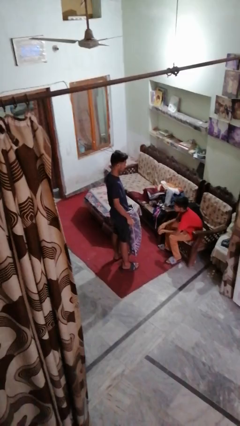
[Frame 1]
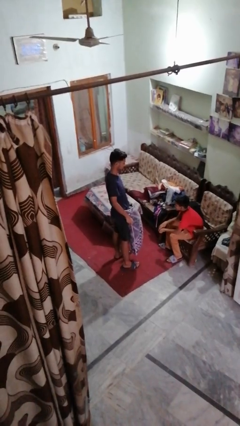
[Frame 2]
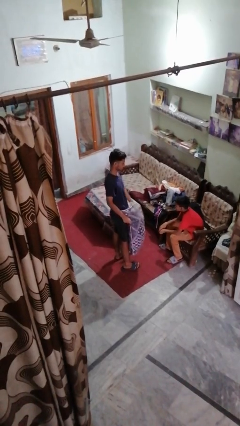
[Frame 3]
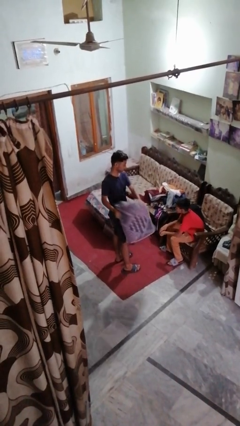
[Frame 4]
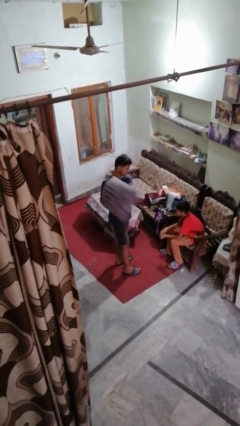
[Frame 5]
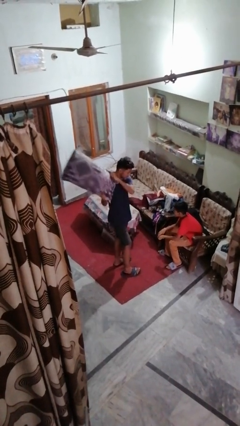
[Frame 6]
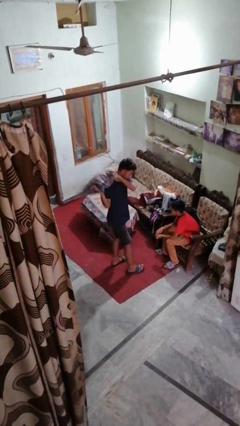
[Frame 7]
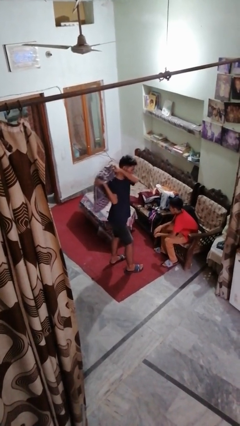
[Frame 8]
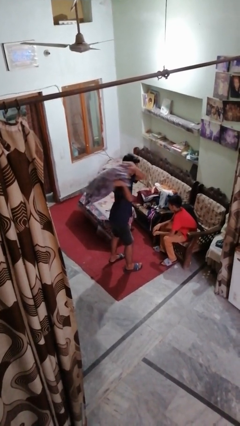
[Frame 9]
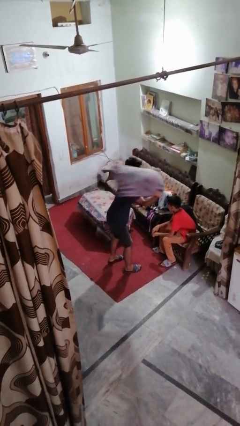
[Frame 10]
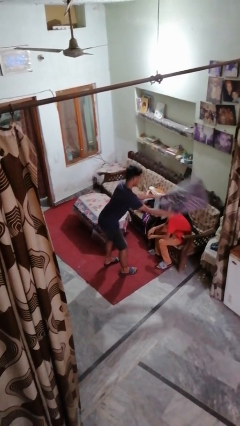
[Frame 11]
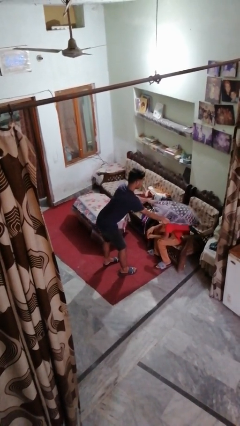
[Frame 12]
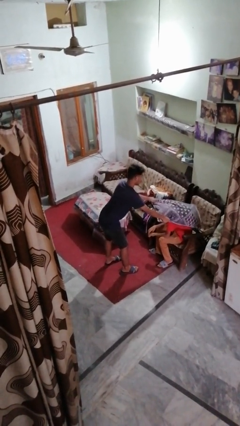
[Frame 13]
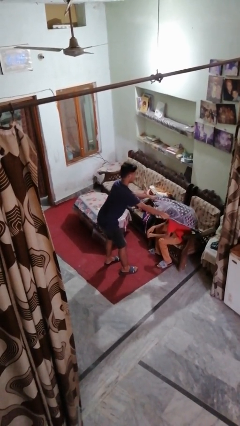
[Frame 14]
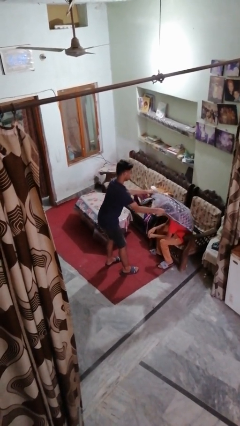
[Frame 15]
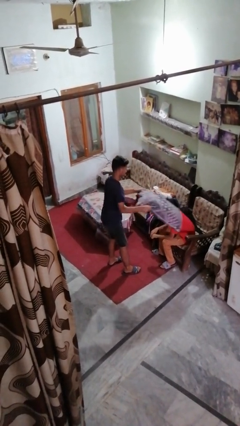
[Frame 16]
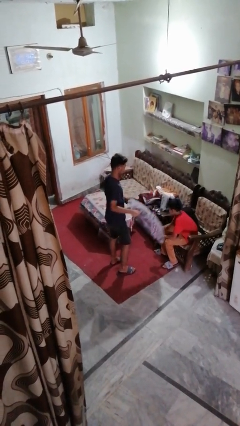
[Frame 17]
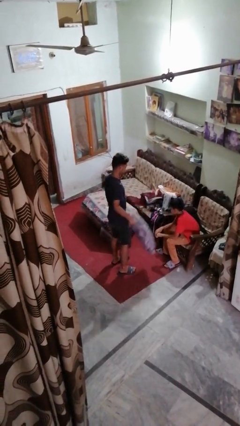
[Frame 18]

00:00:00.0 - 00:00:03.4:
person hits person with pillow

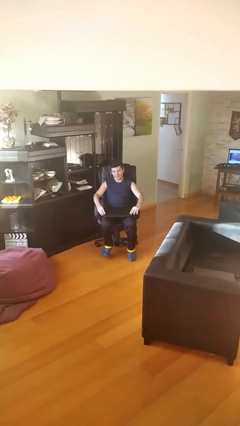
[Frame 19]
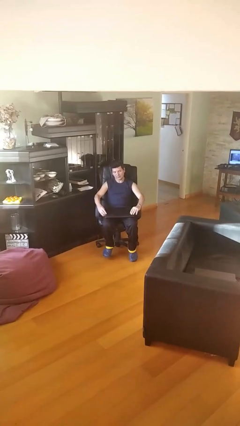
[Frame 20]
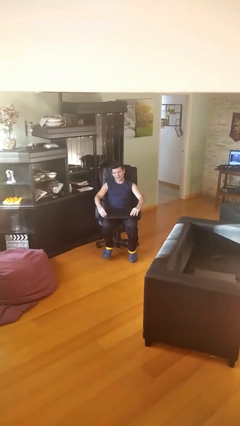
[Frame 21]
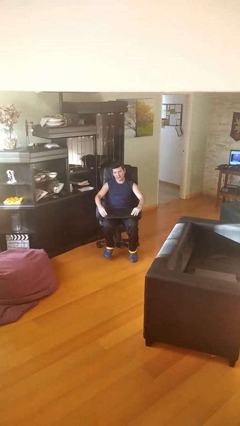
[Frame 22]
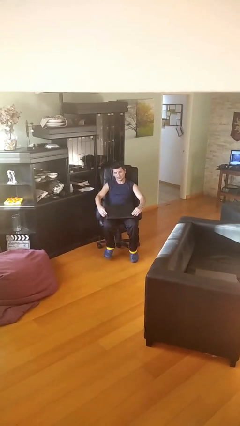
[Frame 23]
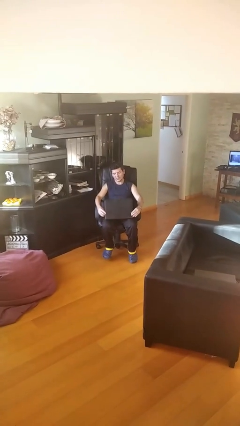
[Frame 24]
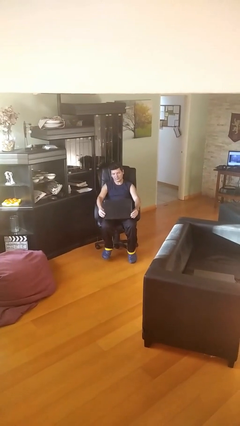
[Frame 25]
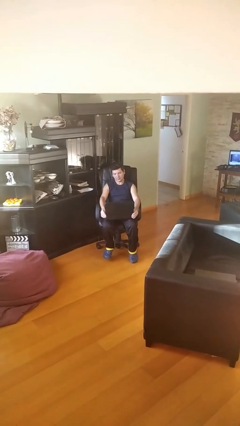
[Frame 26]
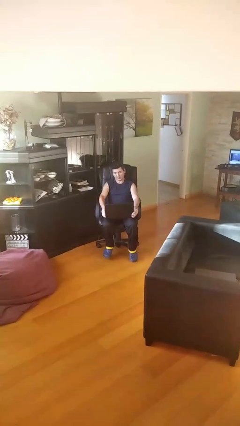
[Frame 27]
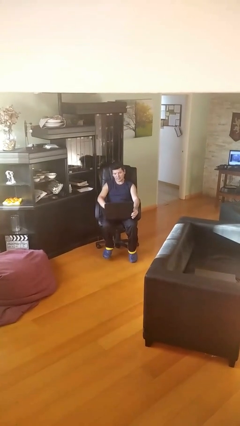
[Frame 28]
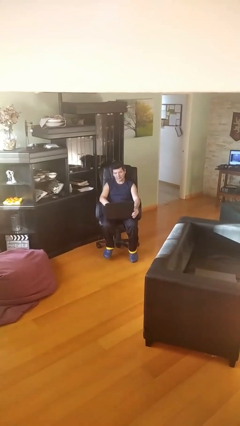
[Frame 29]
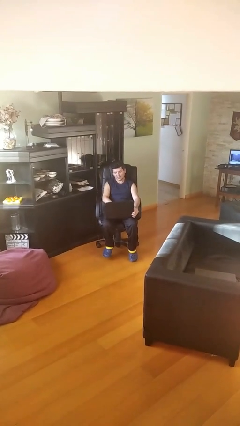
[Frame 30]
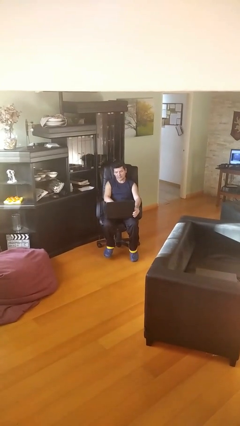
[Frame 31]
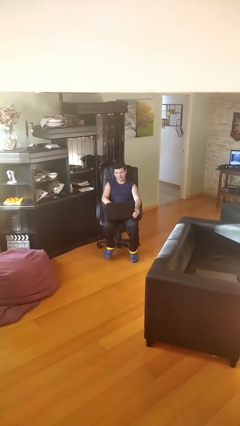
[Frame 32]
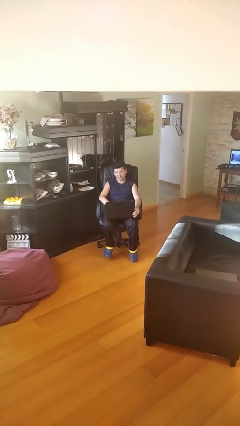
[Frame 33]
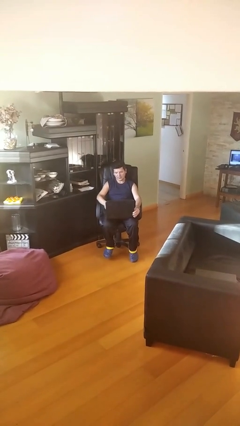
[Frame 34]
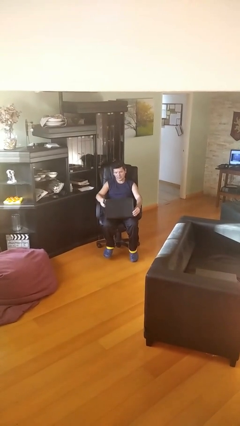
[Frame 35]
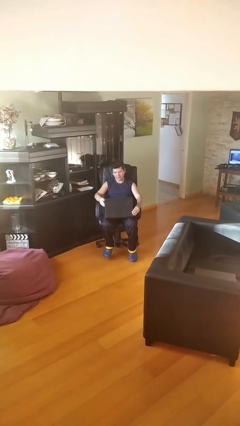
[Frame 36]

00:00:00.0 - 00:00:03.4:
person interacts with laptop

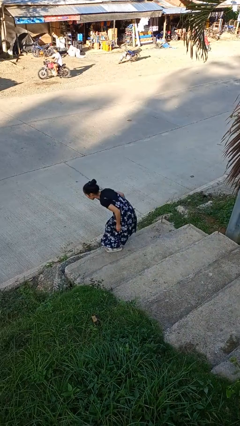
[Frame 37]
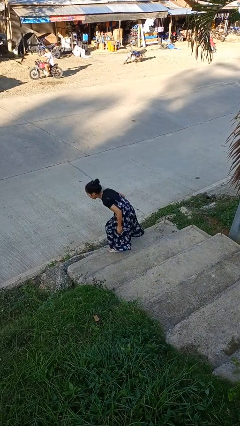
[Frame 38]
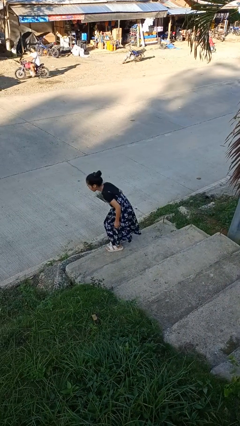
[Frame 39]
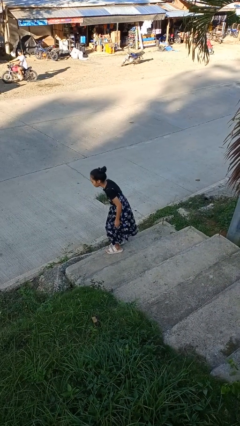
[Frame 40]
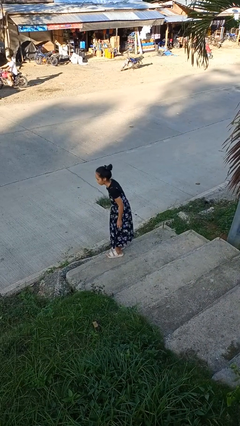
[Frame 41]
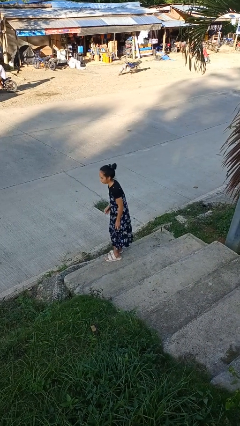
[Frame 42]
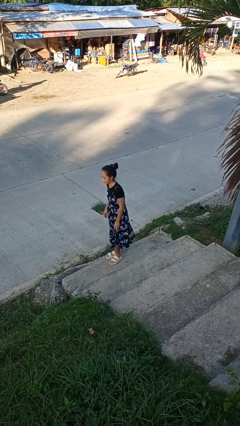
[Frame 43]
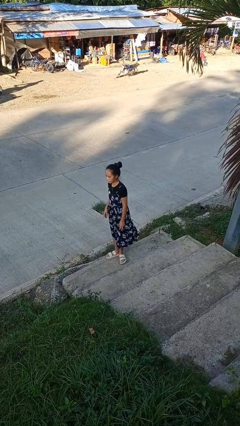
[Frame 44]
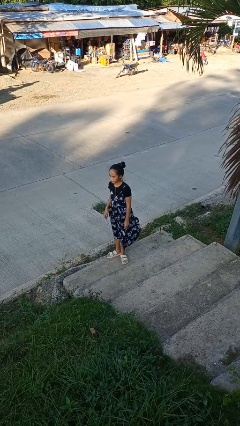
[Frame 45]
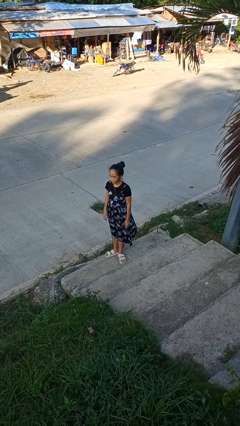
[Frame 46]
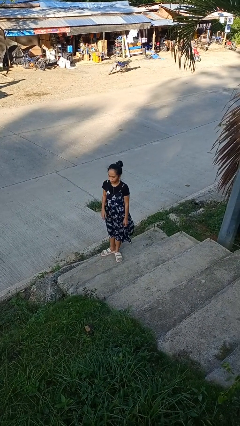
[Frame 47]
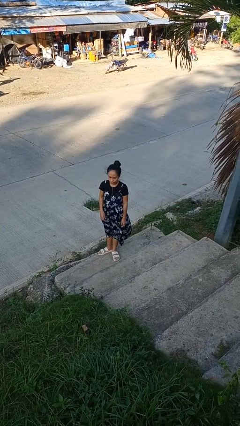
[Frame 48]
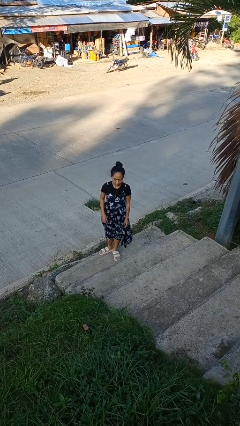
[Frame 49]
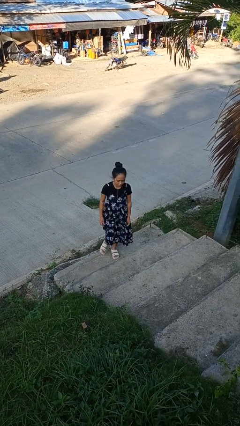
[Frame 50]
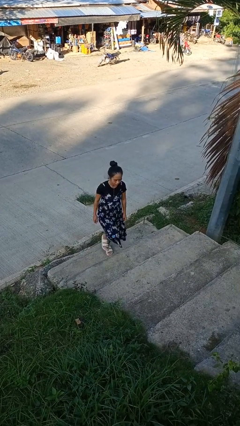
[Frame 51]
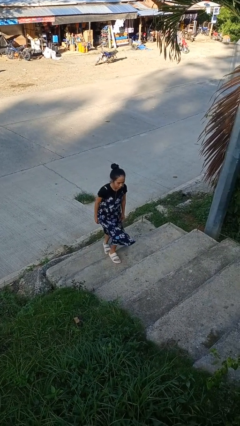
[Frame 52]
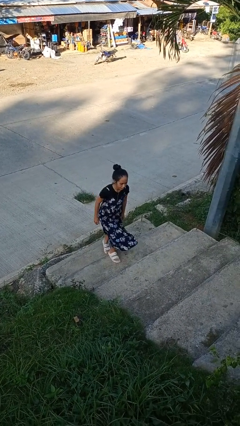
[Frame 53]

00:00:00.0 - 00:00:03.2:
person trips on stair

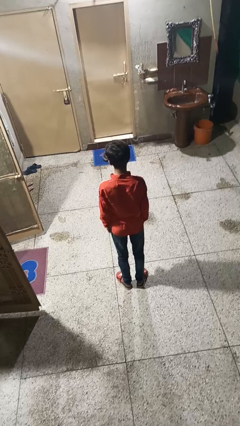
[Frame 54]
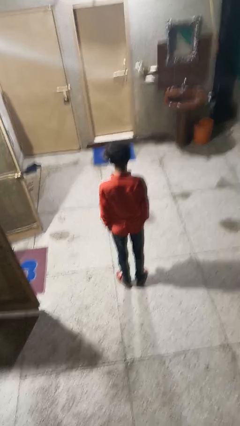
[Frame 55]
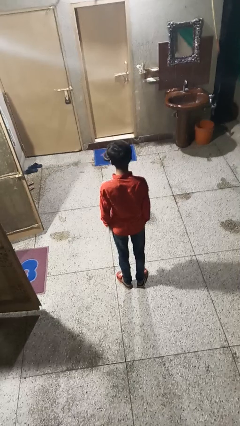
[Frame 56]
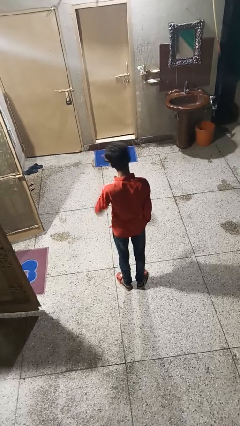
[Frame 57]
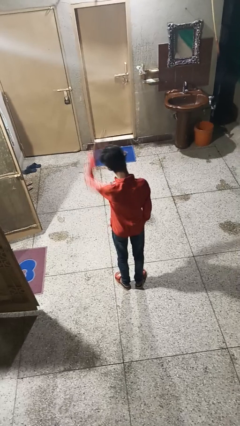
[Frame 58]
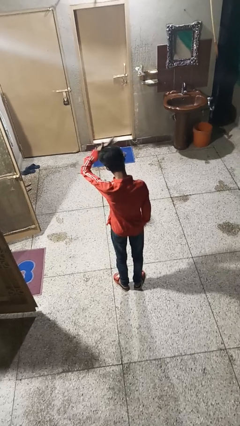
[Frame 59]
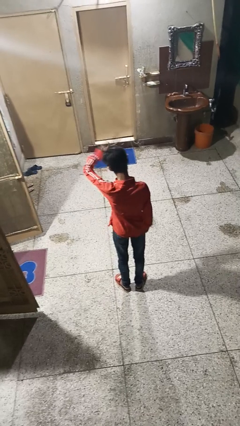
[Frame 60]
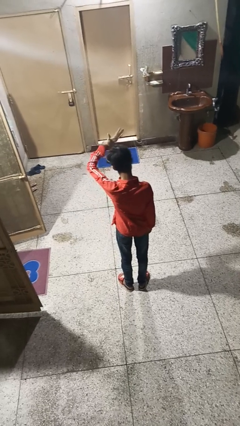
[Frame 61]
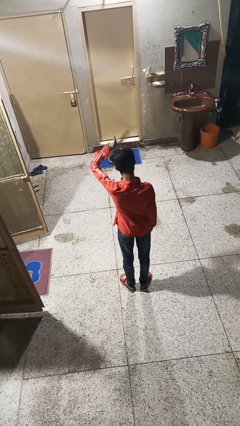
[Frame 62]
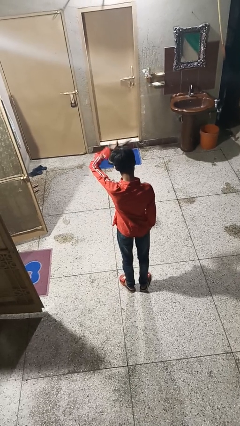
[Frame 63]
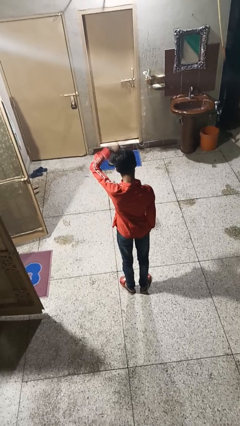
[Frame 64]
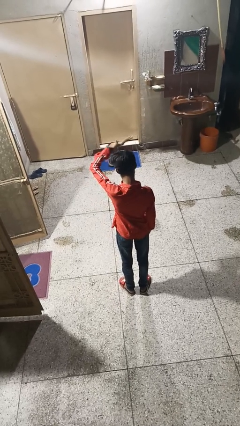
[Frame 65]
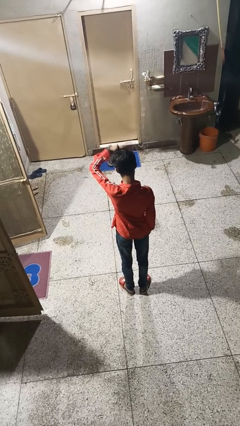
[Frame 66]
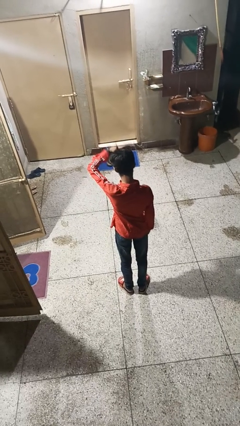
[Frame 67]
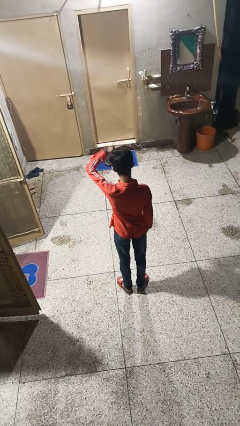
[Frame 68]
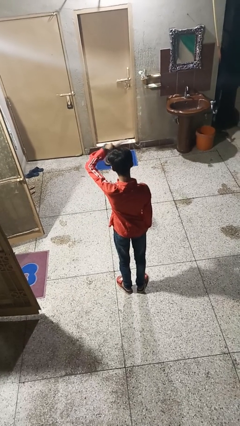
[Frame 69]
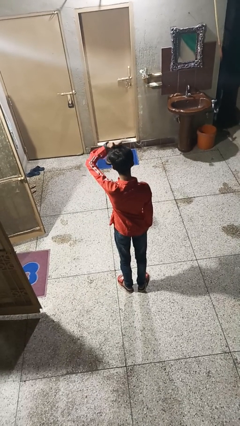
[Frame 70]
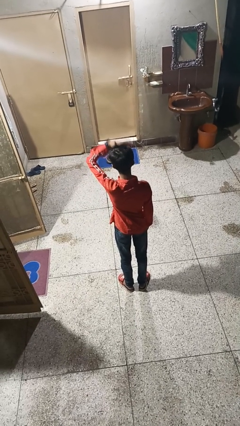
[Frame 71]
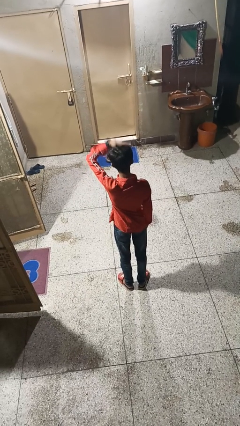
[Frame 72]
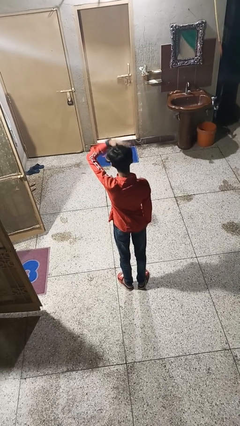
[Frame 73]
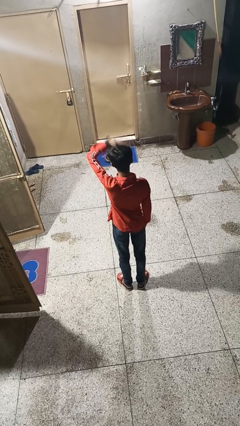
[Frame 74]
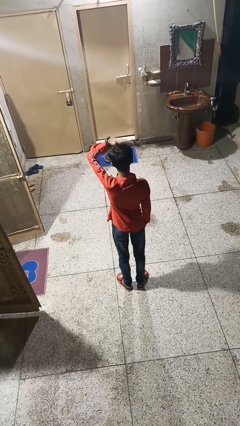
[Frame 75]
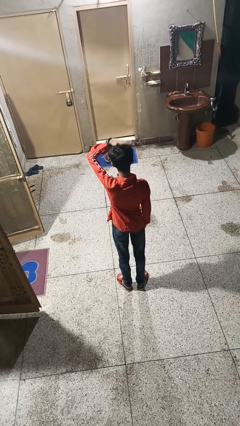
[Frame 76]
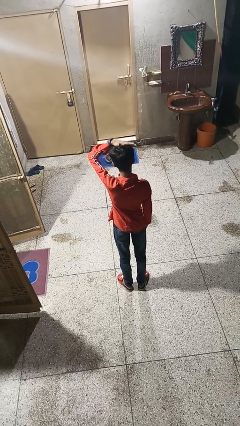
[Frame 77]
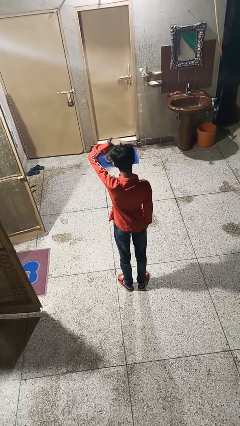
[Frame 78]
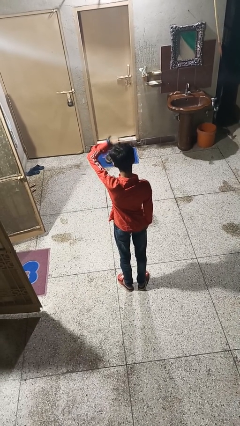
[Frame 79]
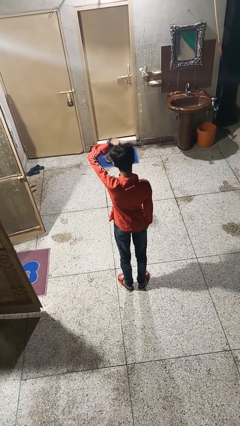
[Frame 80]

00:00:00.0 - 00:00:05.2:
person pats head

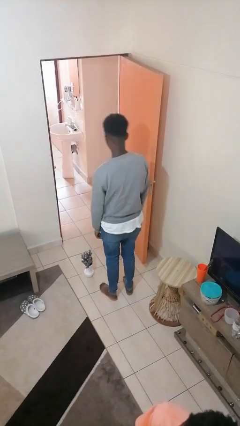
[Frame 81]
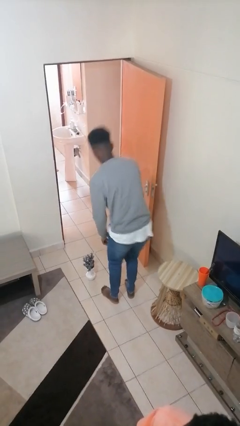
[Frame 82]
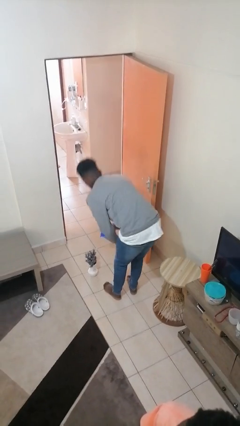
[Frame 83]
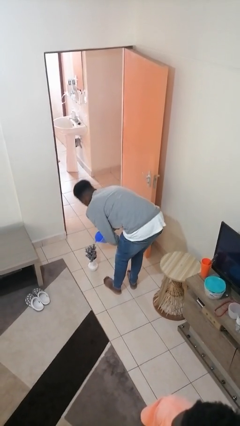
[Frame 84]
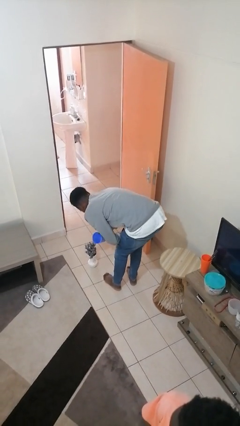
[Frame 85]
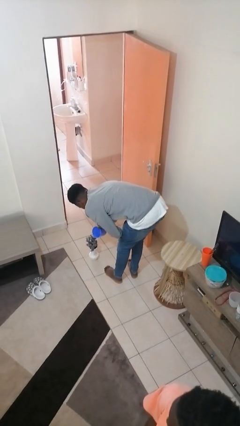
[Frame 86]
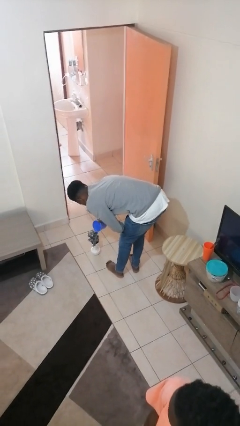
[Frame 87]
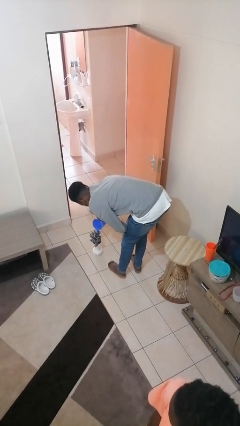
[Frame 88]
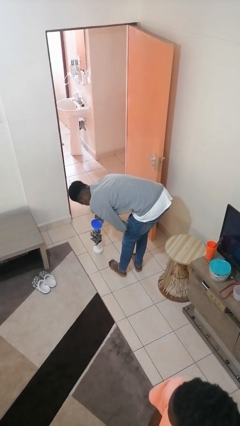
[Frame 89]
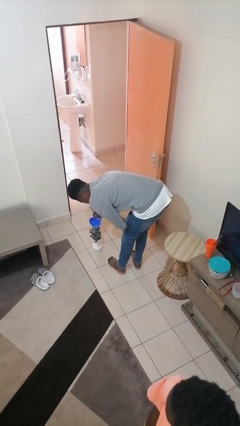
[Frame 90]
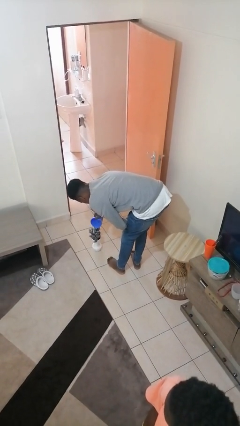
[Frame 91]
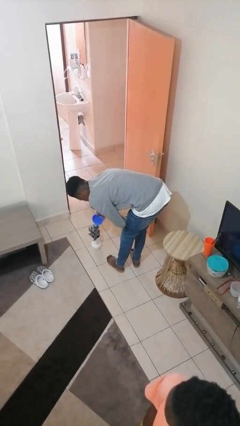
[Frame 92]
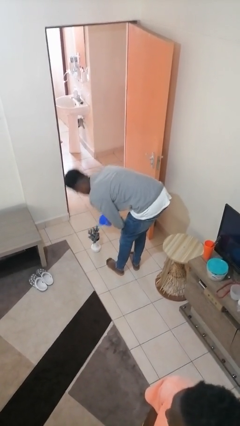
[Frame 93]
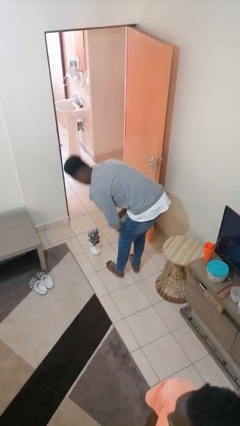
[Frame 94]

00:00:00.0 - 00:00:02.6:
person waters houseplant
